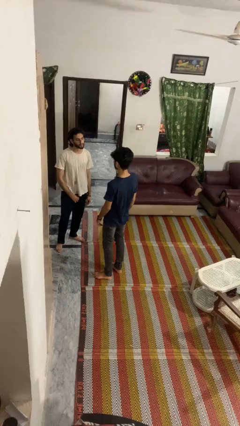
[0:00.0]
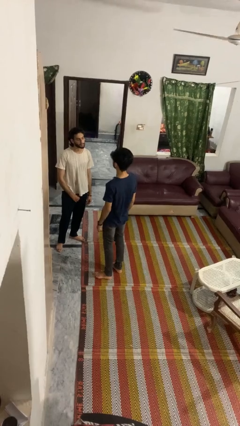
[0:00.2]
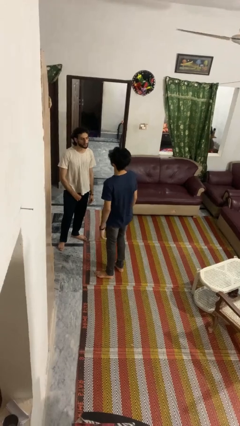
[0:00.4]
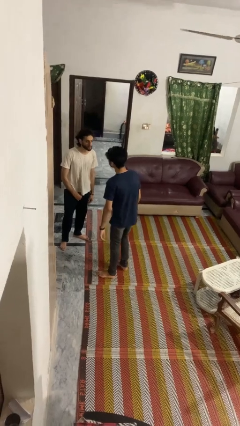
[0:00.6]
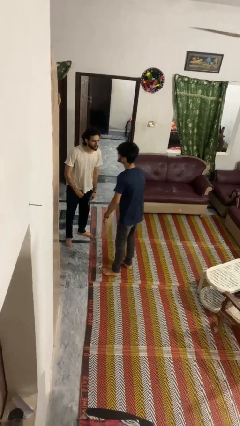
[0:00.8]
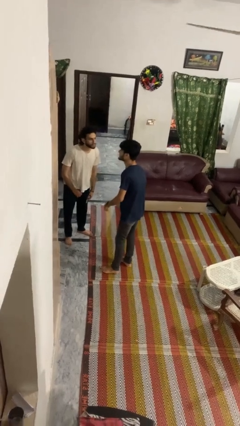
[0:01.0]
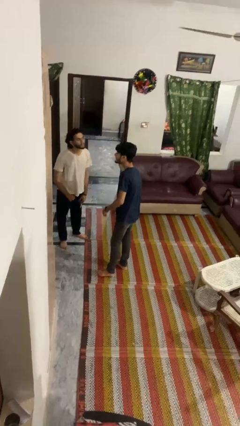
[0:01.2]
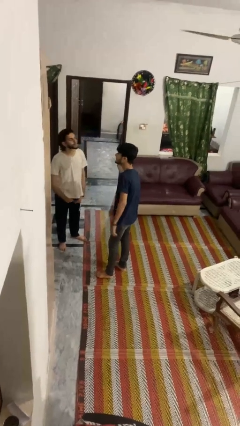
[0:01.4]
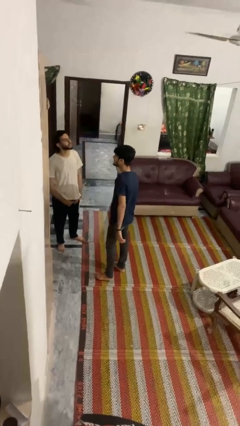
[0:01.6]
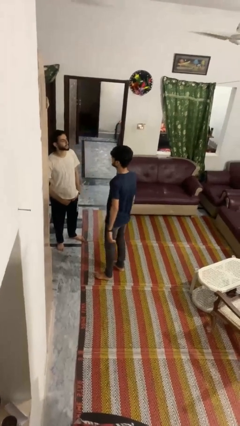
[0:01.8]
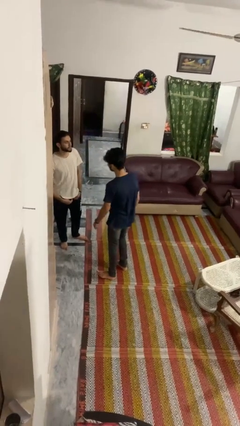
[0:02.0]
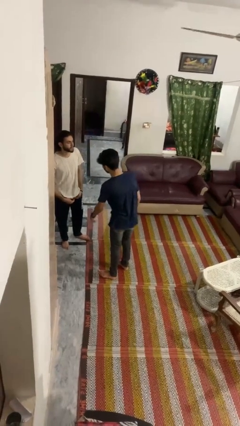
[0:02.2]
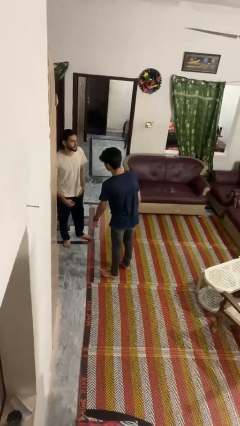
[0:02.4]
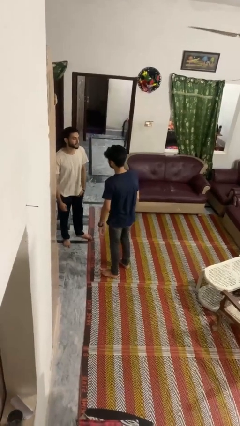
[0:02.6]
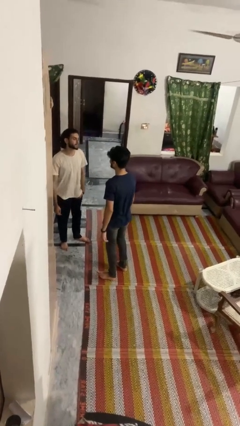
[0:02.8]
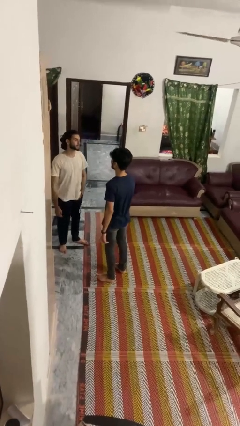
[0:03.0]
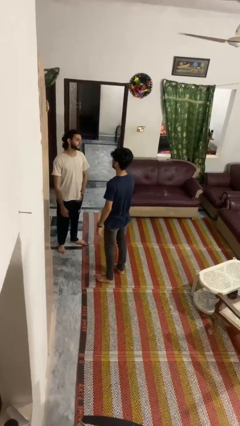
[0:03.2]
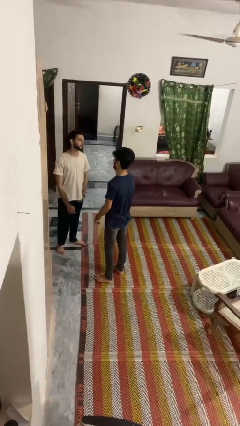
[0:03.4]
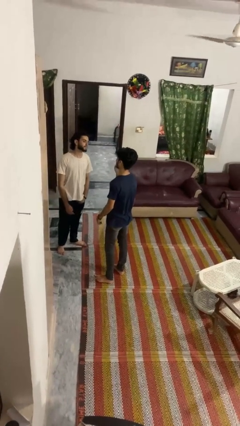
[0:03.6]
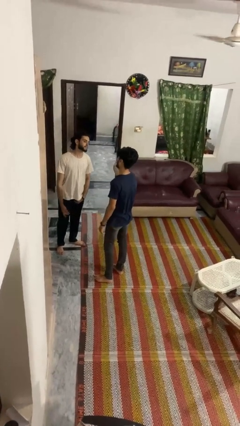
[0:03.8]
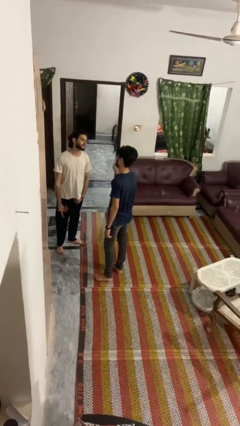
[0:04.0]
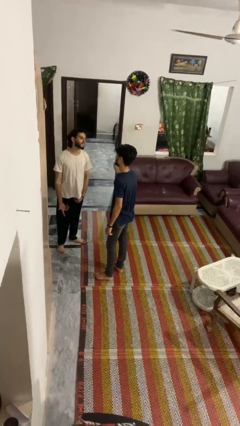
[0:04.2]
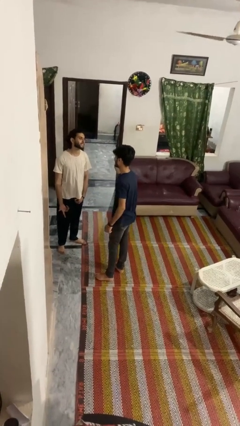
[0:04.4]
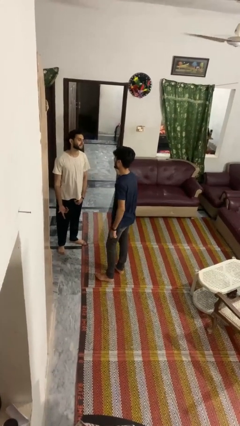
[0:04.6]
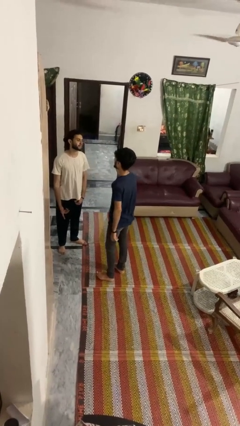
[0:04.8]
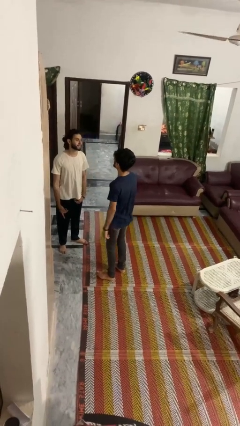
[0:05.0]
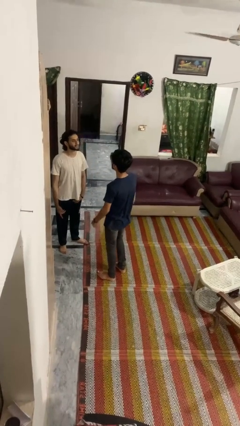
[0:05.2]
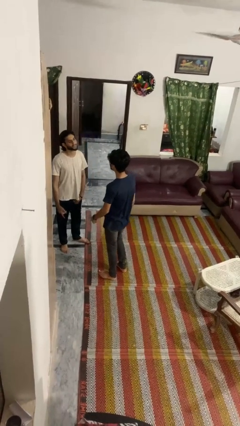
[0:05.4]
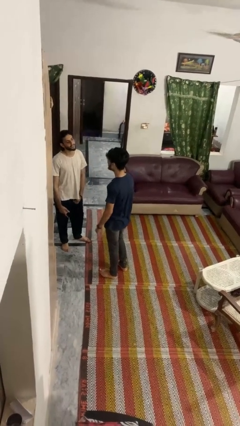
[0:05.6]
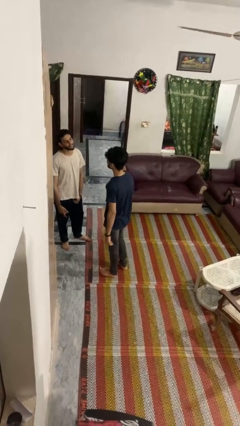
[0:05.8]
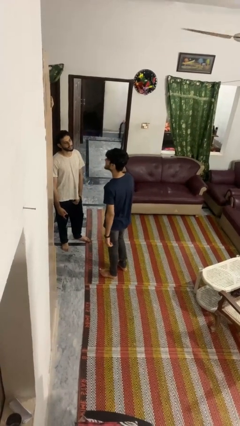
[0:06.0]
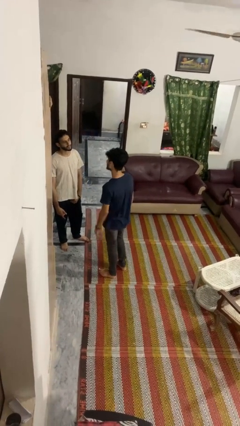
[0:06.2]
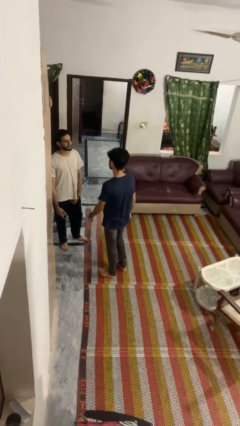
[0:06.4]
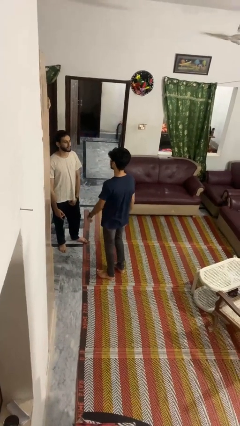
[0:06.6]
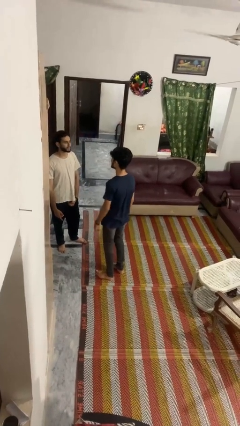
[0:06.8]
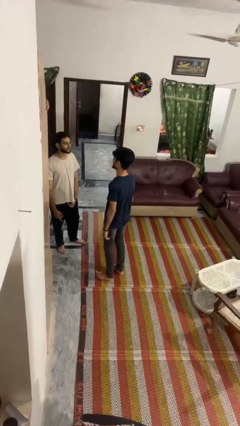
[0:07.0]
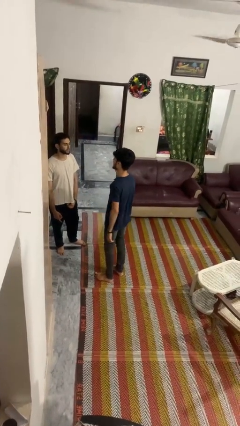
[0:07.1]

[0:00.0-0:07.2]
person laughs with person

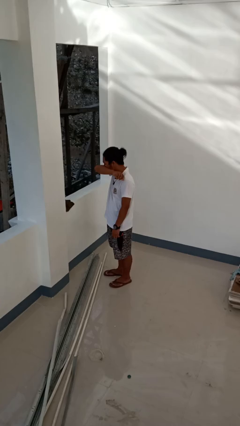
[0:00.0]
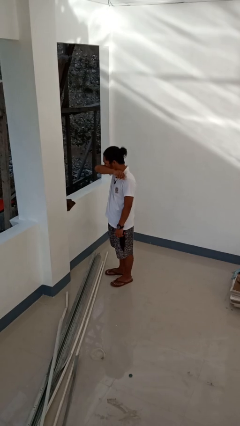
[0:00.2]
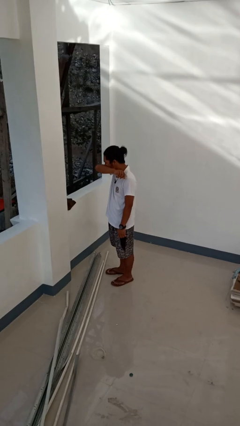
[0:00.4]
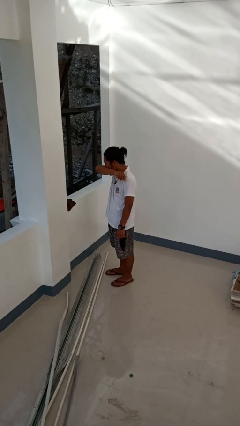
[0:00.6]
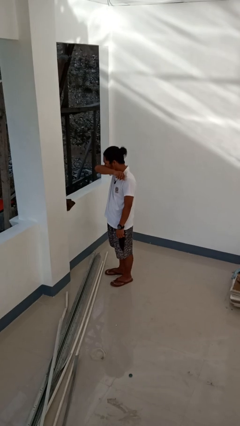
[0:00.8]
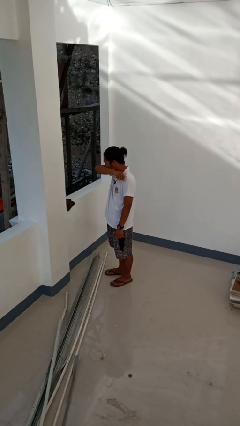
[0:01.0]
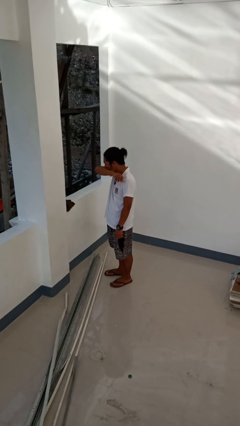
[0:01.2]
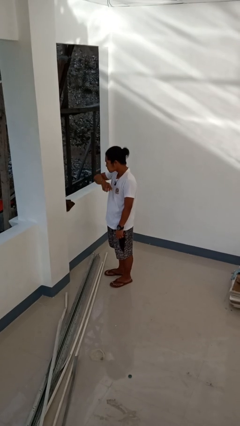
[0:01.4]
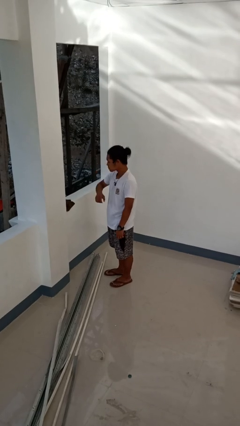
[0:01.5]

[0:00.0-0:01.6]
person sneezes into arm

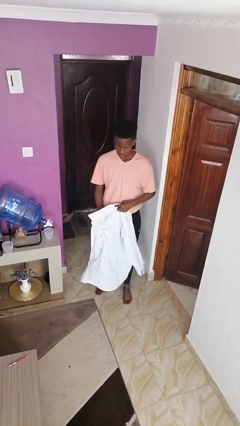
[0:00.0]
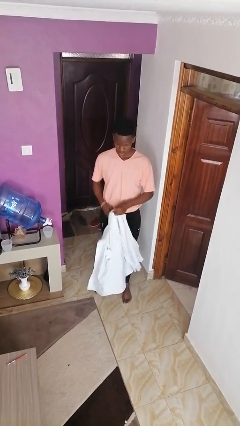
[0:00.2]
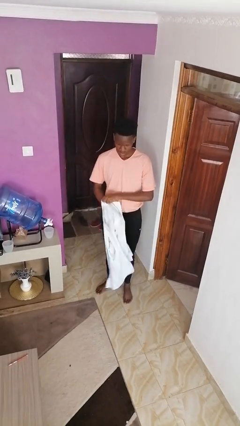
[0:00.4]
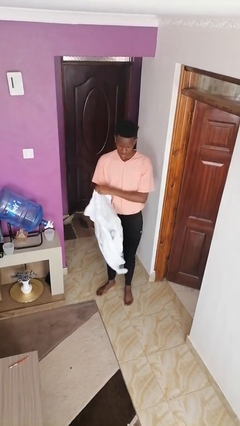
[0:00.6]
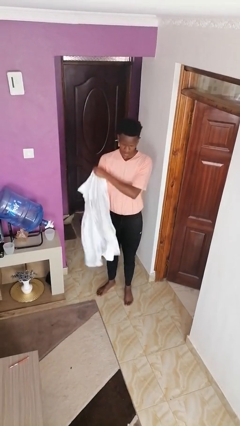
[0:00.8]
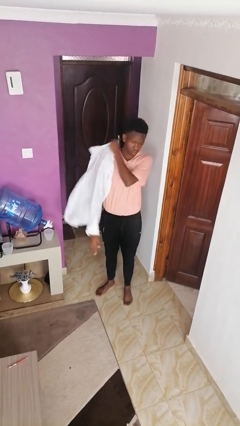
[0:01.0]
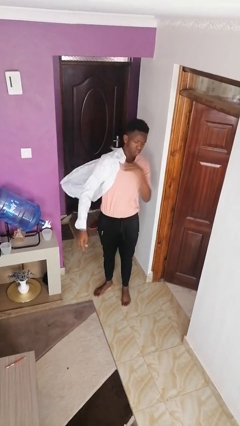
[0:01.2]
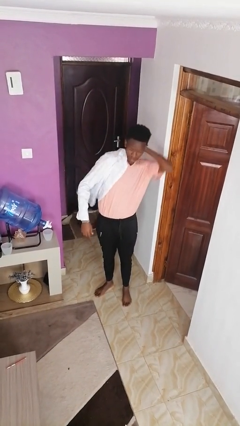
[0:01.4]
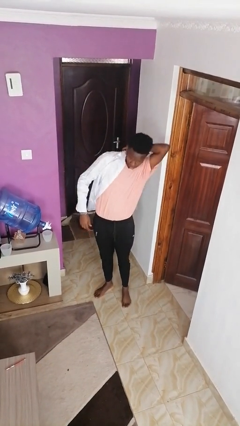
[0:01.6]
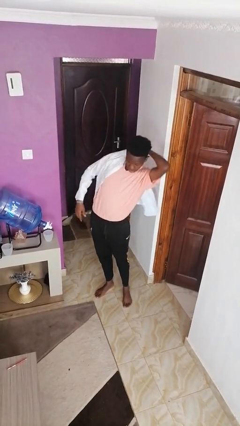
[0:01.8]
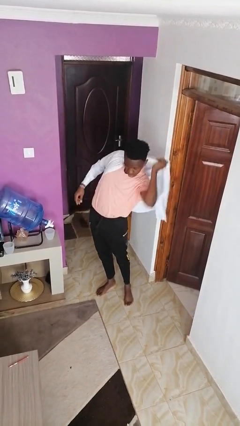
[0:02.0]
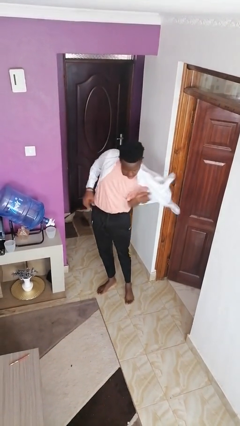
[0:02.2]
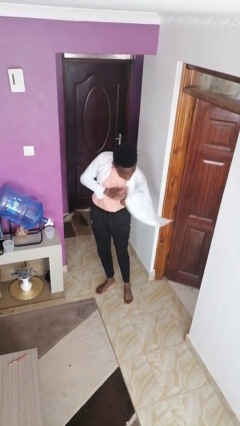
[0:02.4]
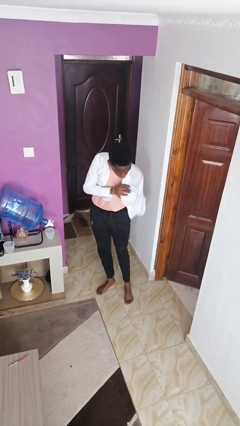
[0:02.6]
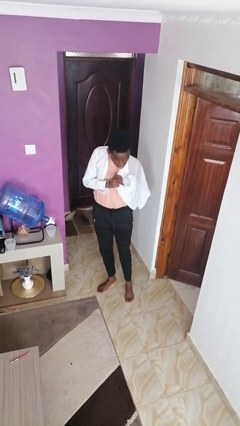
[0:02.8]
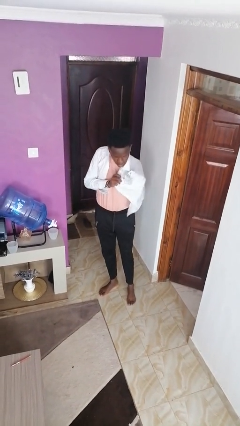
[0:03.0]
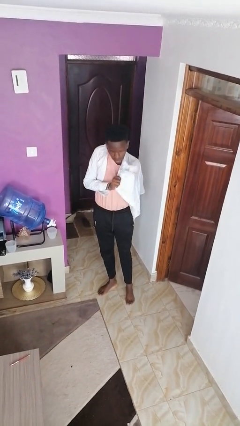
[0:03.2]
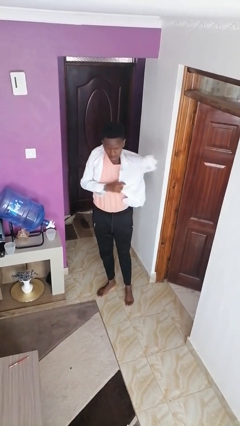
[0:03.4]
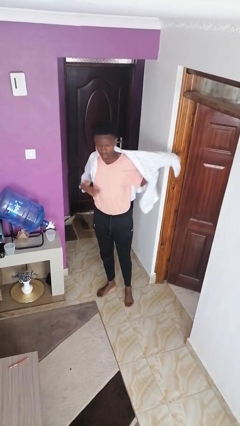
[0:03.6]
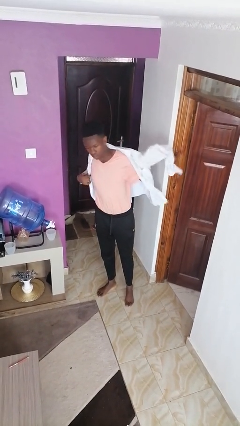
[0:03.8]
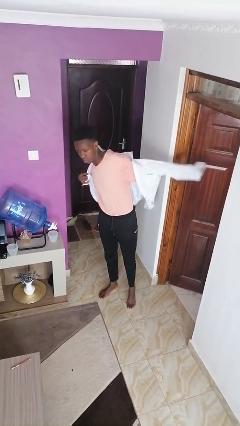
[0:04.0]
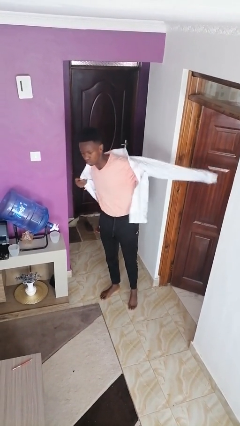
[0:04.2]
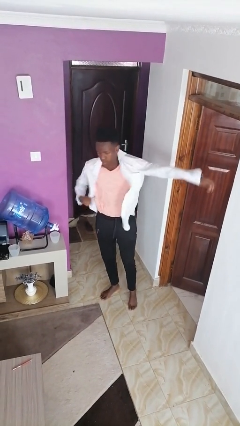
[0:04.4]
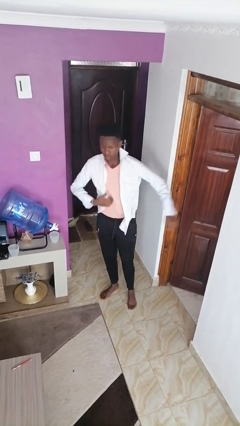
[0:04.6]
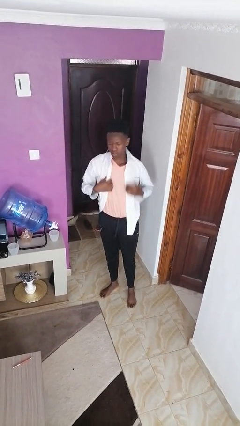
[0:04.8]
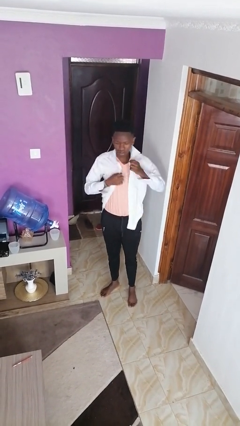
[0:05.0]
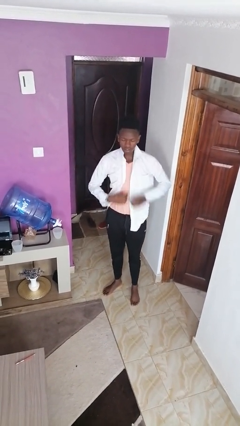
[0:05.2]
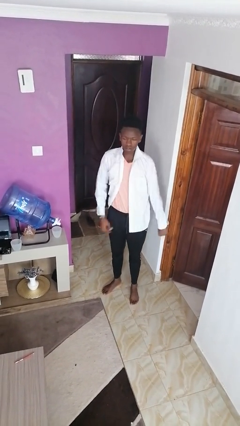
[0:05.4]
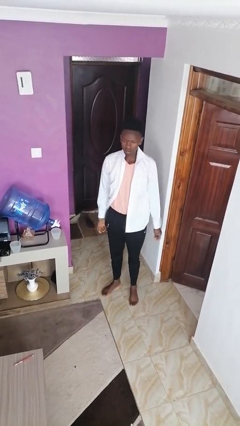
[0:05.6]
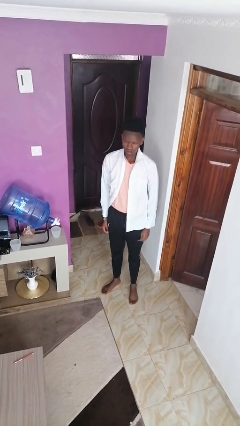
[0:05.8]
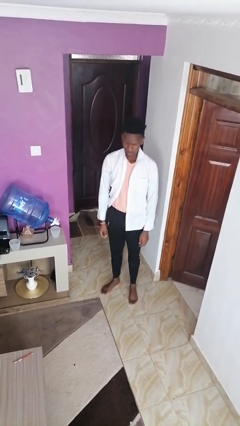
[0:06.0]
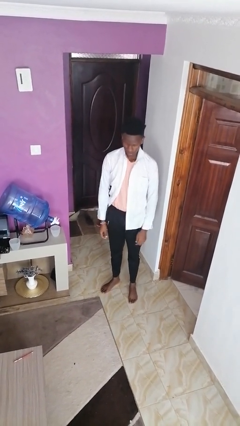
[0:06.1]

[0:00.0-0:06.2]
person puts on shirt

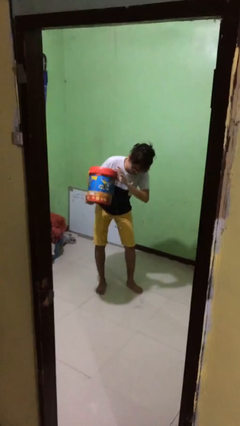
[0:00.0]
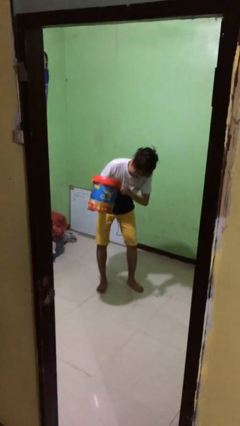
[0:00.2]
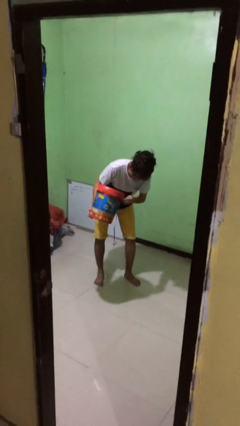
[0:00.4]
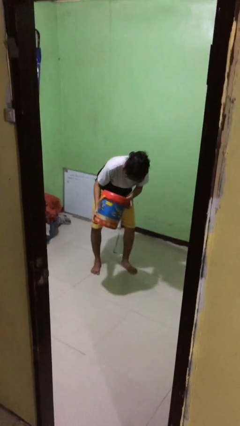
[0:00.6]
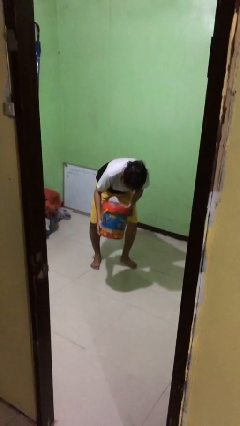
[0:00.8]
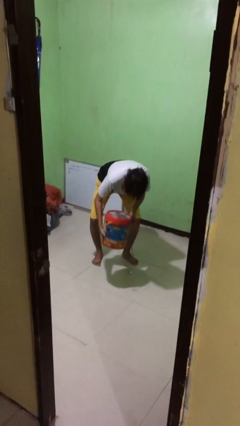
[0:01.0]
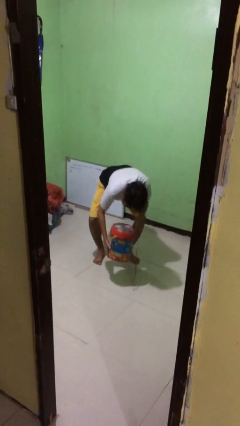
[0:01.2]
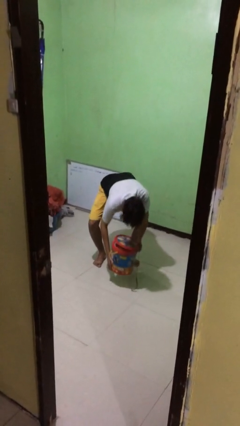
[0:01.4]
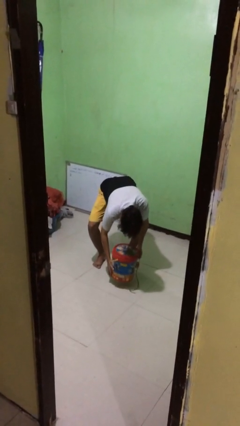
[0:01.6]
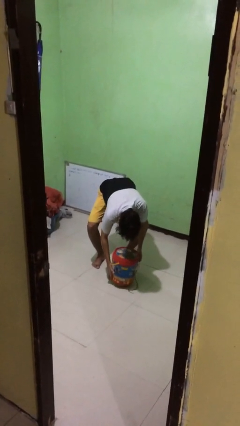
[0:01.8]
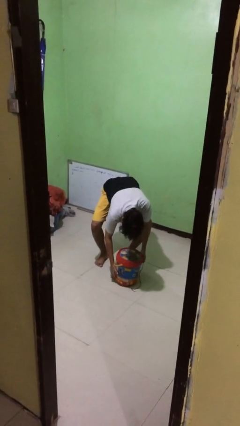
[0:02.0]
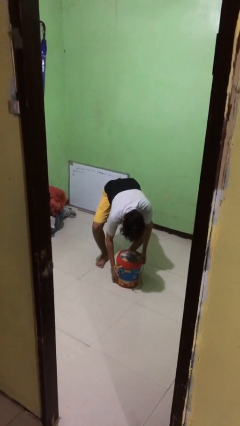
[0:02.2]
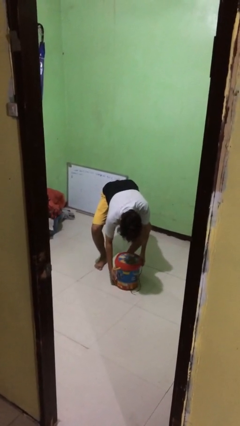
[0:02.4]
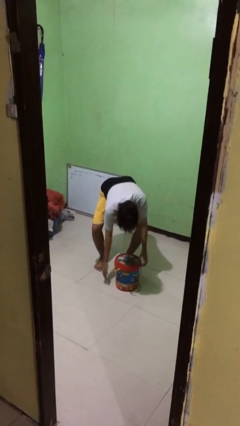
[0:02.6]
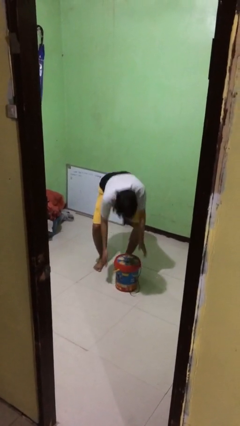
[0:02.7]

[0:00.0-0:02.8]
person puts down object on floor
